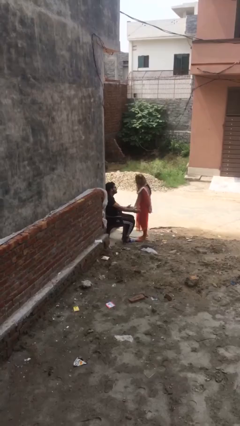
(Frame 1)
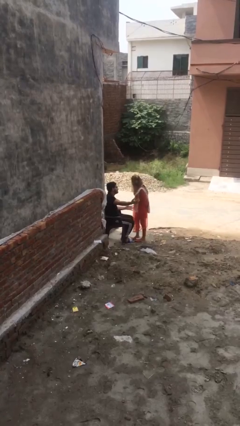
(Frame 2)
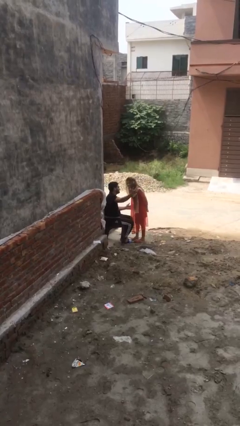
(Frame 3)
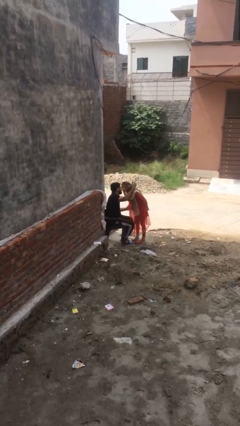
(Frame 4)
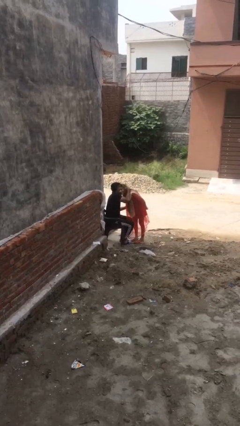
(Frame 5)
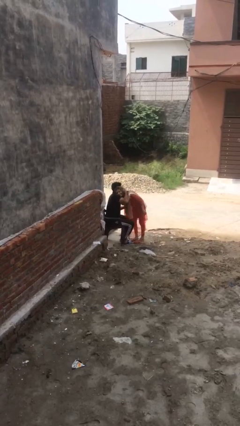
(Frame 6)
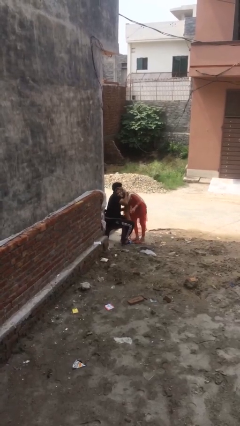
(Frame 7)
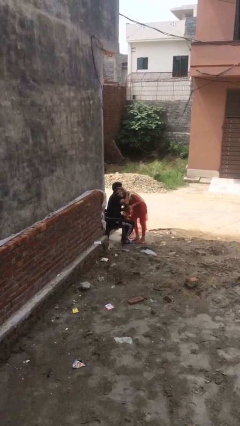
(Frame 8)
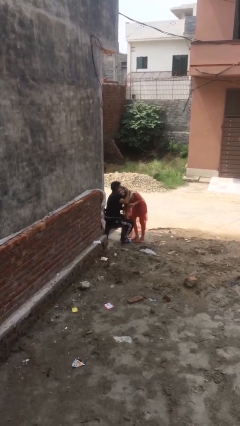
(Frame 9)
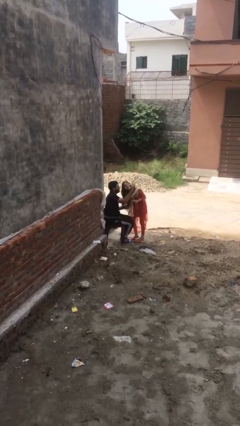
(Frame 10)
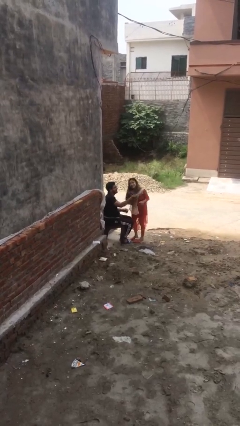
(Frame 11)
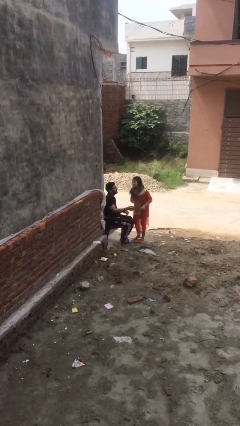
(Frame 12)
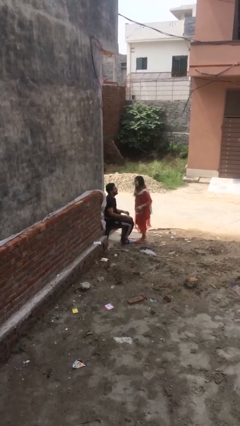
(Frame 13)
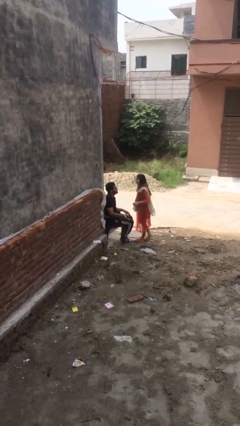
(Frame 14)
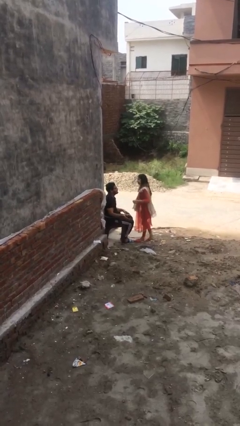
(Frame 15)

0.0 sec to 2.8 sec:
person embraces person

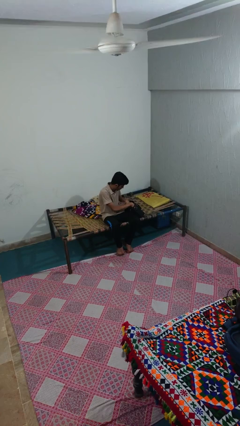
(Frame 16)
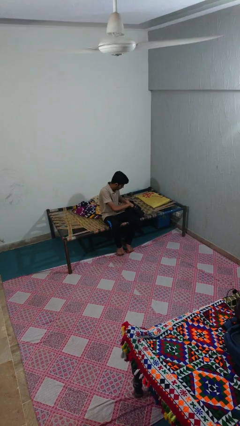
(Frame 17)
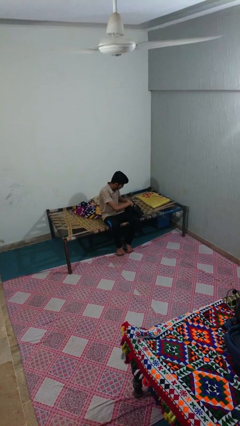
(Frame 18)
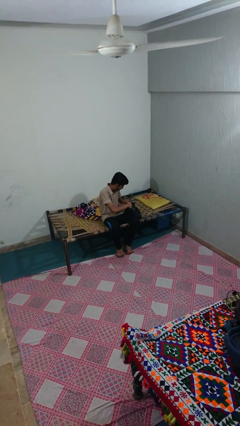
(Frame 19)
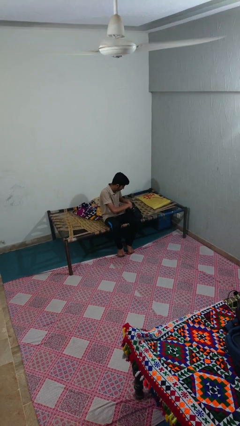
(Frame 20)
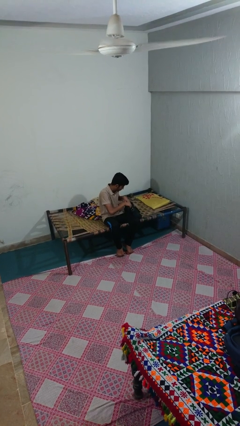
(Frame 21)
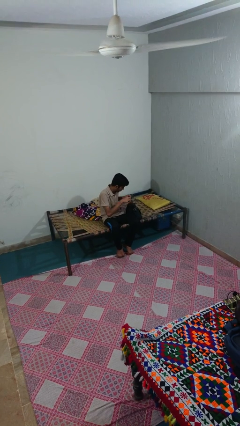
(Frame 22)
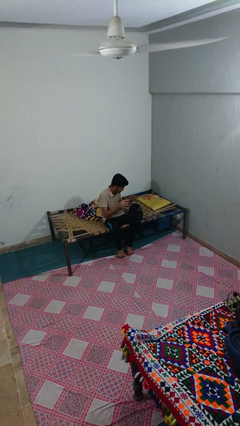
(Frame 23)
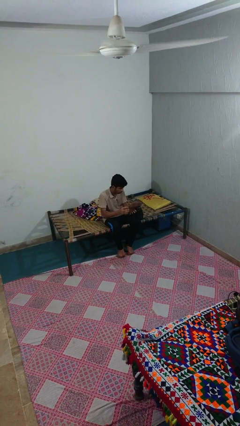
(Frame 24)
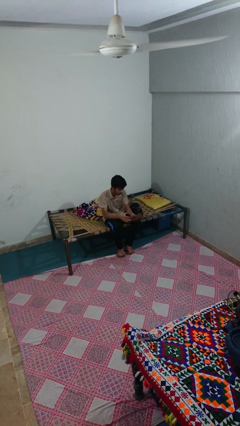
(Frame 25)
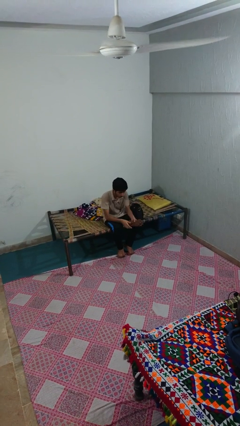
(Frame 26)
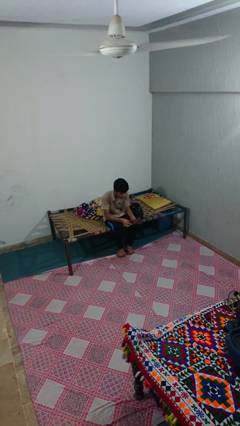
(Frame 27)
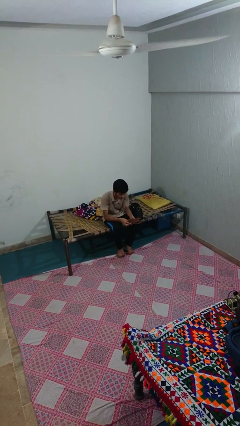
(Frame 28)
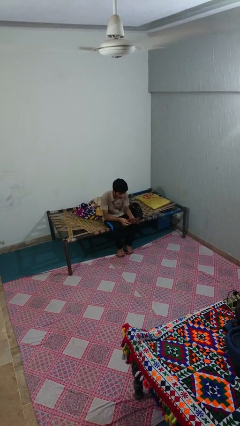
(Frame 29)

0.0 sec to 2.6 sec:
person takes object from purse

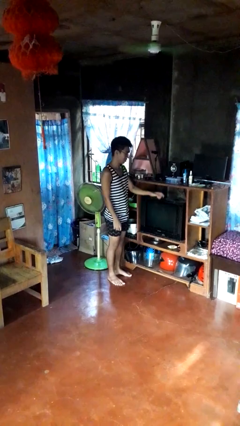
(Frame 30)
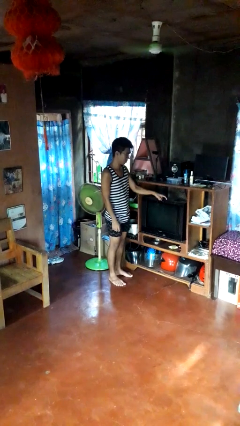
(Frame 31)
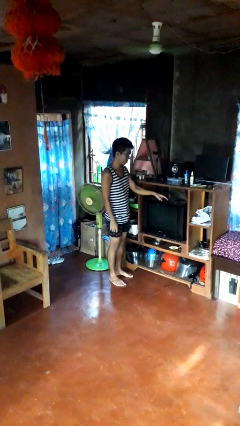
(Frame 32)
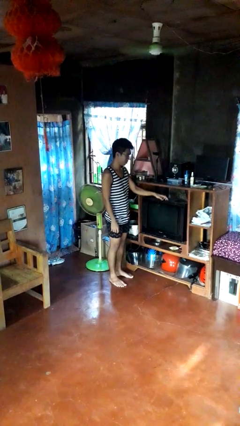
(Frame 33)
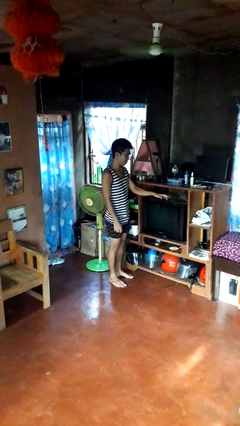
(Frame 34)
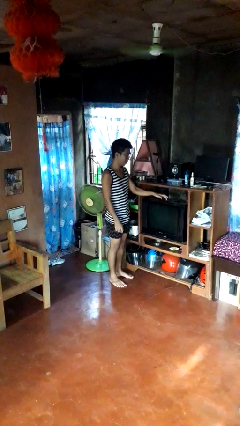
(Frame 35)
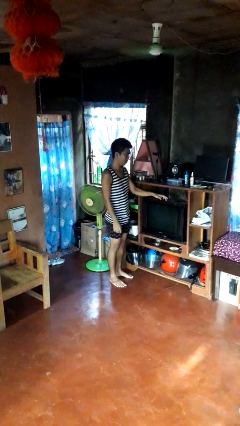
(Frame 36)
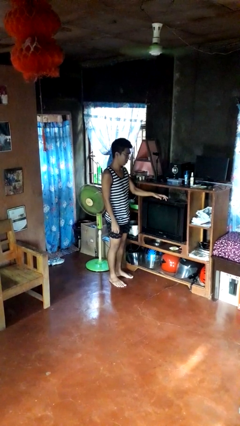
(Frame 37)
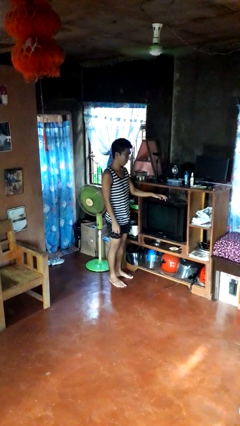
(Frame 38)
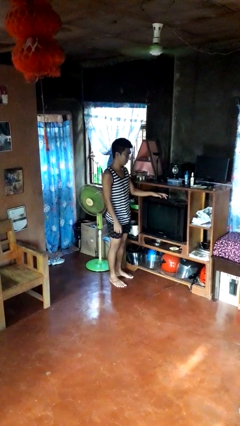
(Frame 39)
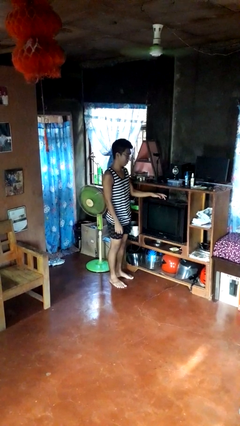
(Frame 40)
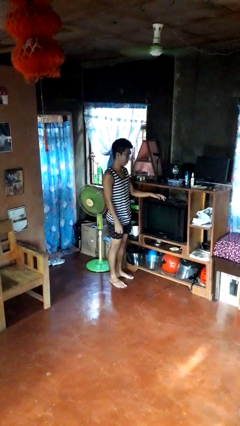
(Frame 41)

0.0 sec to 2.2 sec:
person taps object with finger

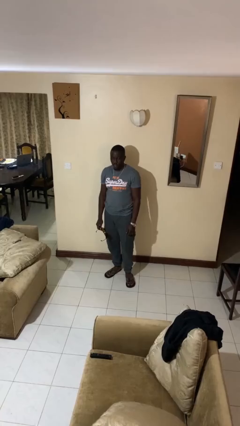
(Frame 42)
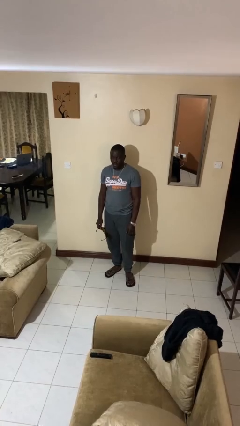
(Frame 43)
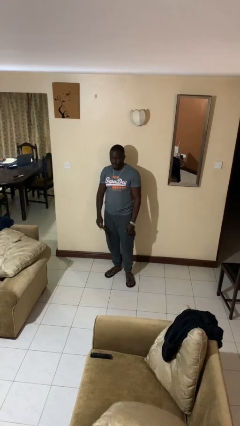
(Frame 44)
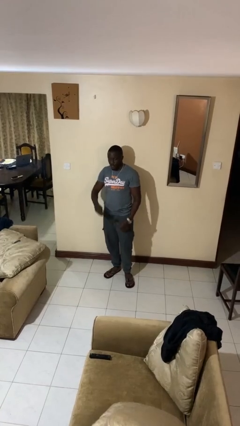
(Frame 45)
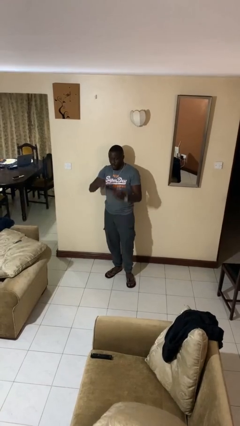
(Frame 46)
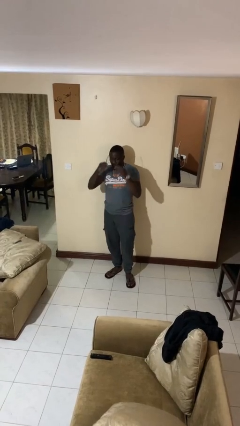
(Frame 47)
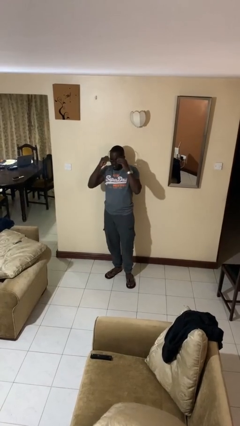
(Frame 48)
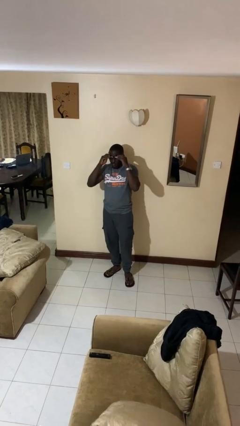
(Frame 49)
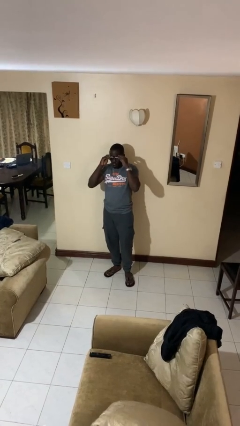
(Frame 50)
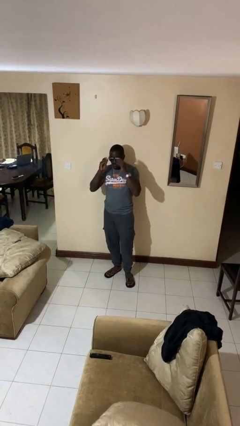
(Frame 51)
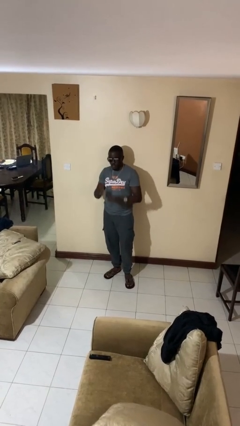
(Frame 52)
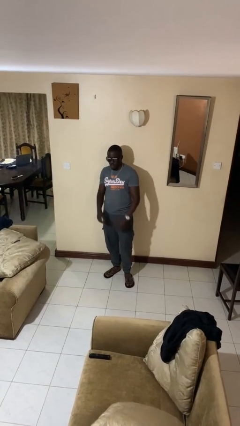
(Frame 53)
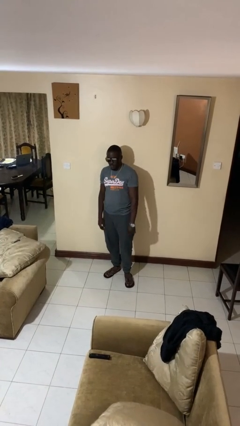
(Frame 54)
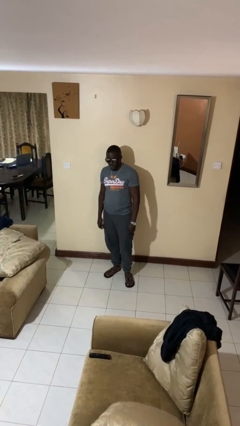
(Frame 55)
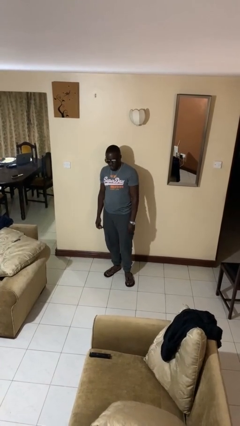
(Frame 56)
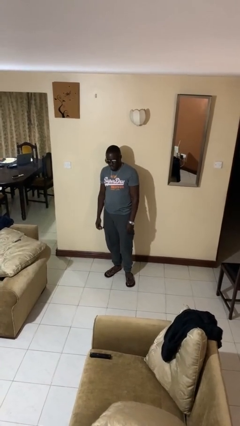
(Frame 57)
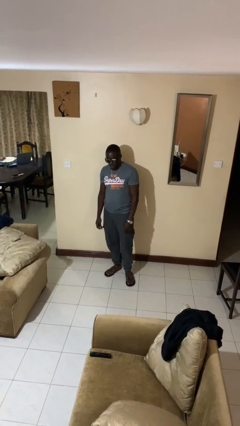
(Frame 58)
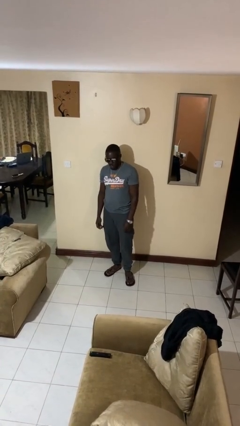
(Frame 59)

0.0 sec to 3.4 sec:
person puts on sunglasses

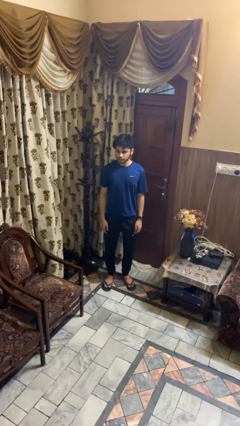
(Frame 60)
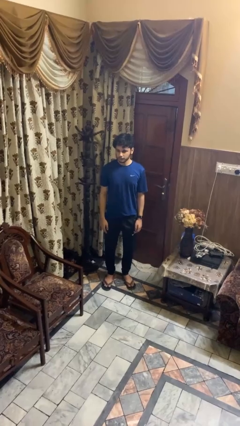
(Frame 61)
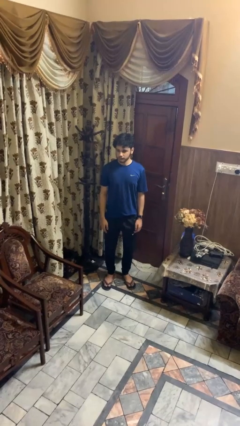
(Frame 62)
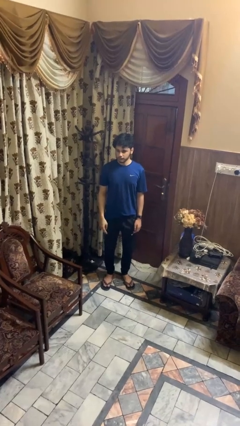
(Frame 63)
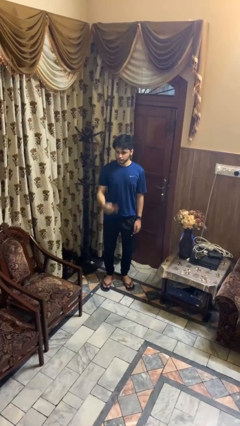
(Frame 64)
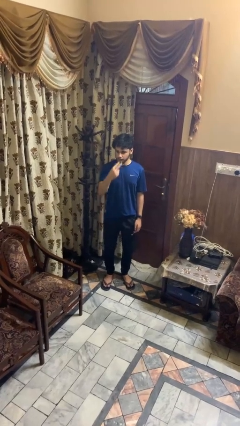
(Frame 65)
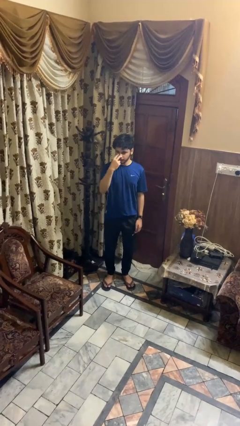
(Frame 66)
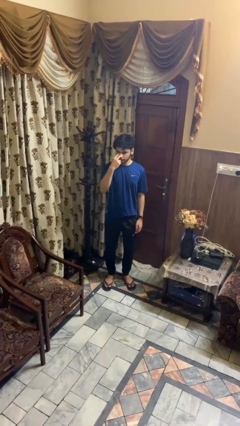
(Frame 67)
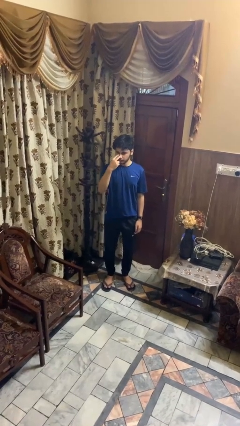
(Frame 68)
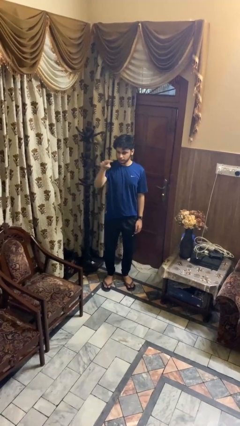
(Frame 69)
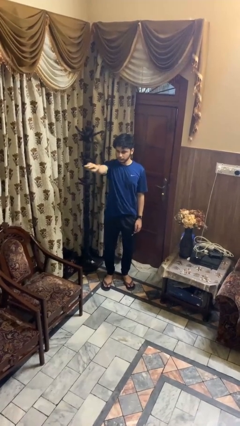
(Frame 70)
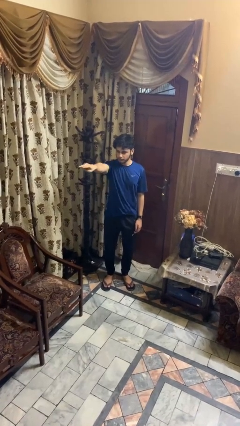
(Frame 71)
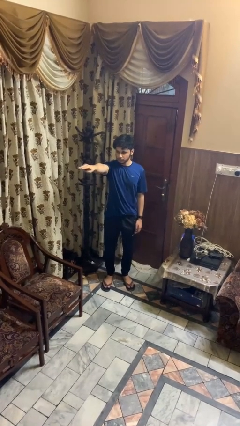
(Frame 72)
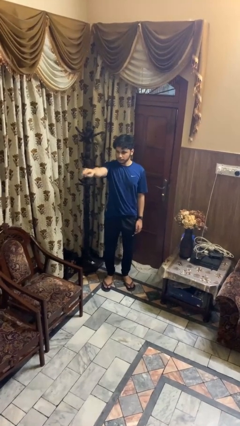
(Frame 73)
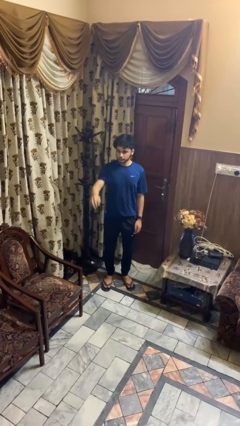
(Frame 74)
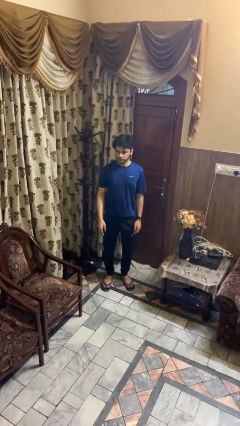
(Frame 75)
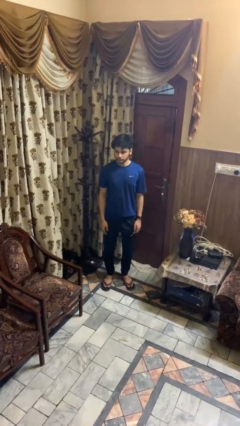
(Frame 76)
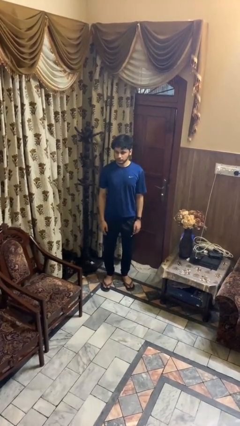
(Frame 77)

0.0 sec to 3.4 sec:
person gestures watch closely

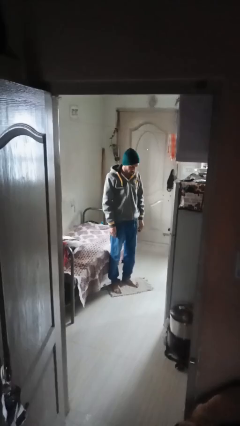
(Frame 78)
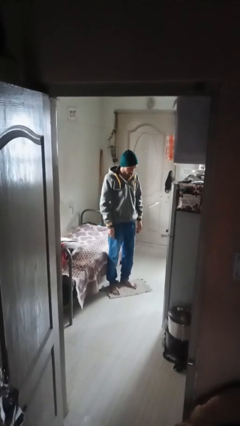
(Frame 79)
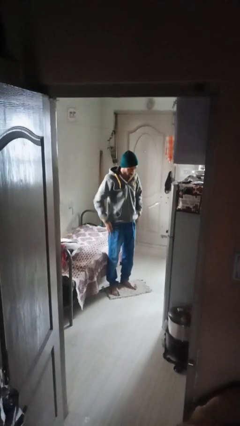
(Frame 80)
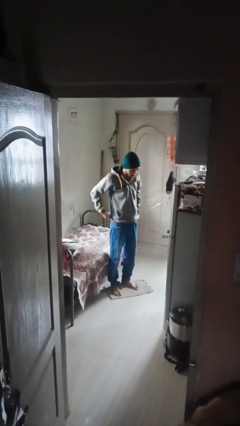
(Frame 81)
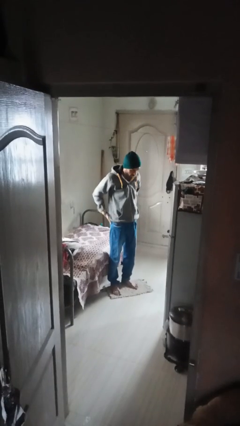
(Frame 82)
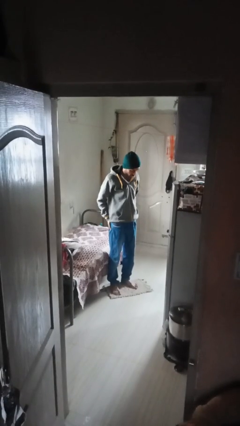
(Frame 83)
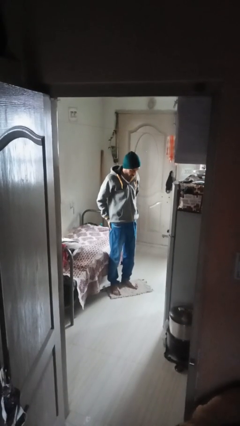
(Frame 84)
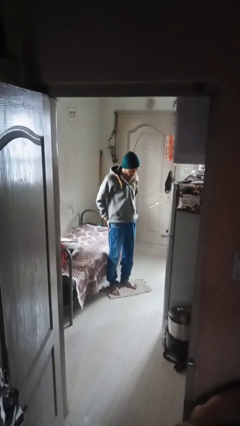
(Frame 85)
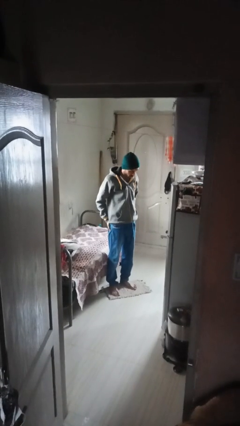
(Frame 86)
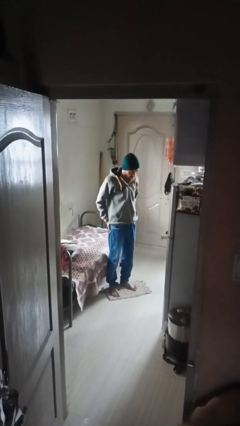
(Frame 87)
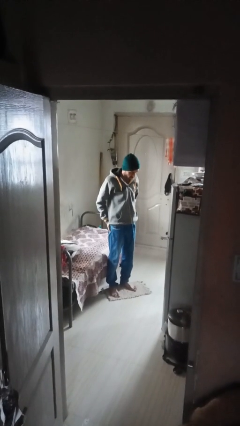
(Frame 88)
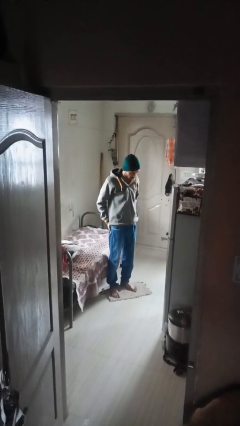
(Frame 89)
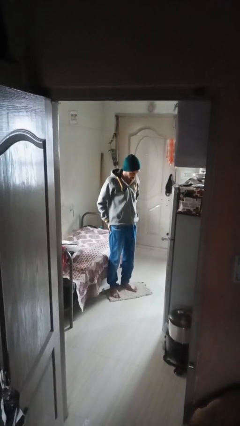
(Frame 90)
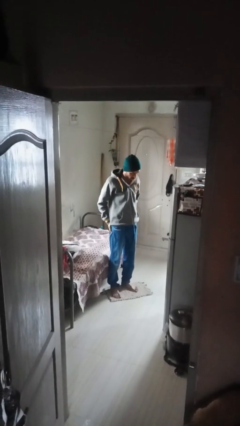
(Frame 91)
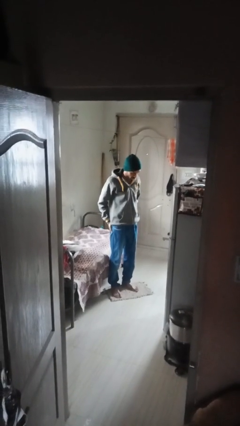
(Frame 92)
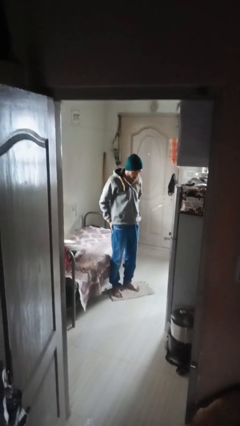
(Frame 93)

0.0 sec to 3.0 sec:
person puts hands in back pockets
